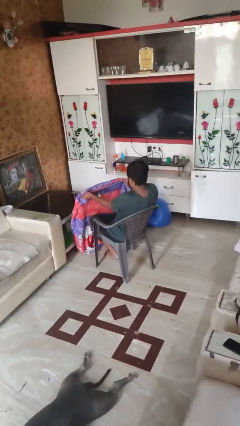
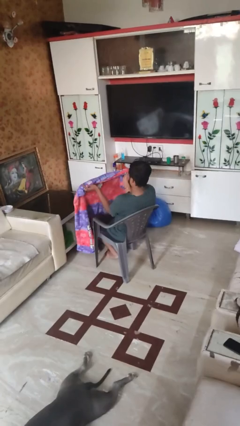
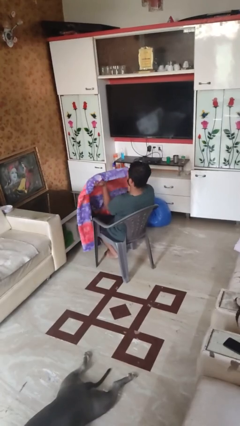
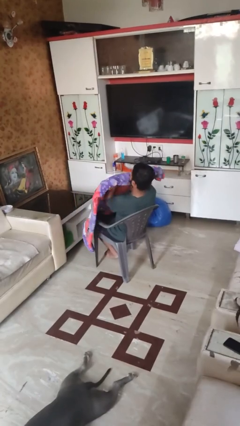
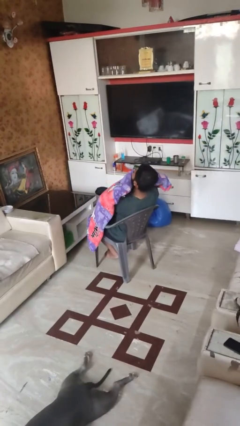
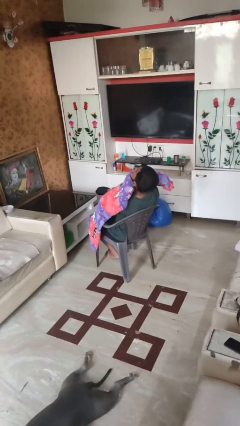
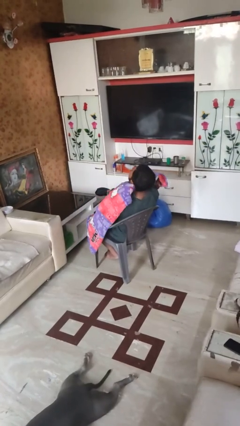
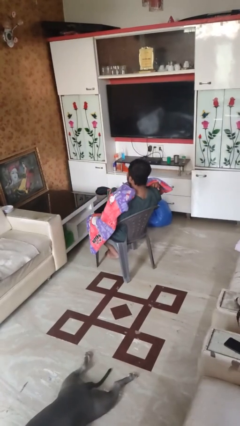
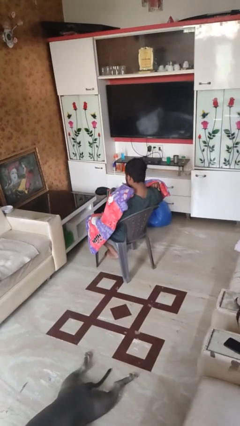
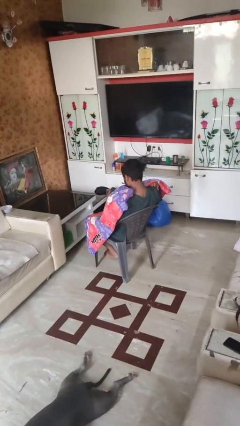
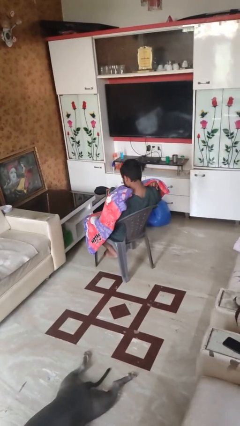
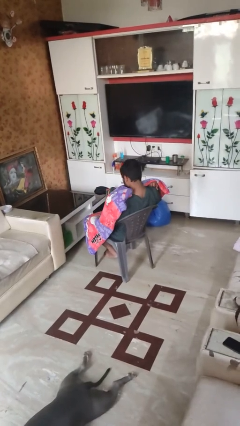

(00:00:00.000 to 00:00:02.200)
person covers with blanket

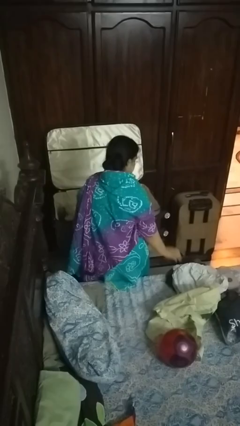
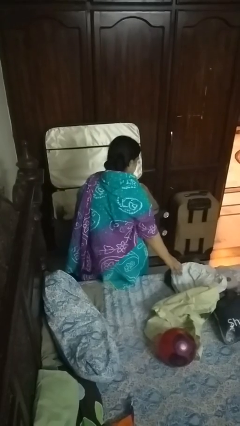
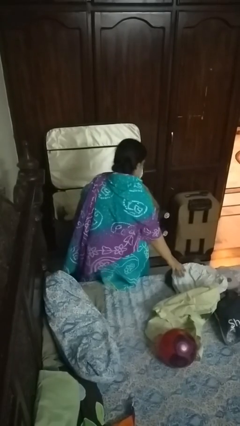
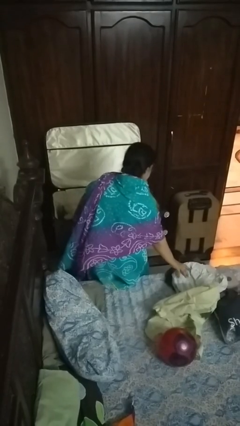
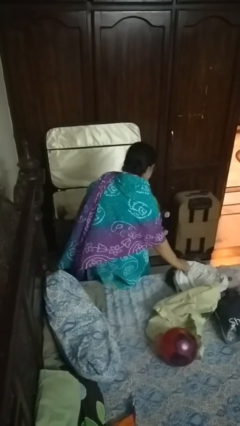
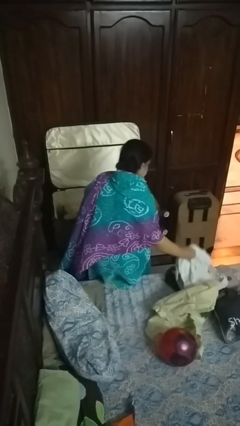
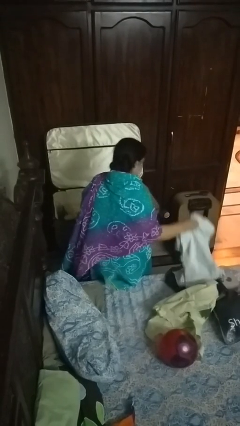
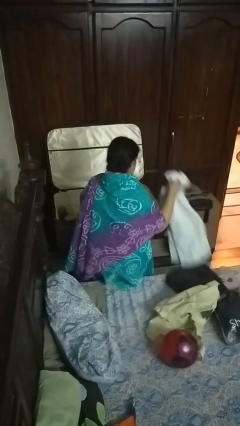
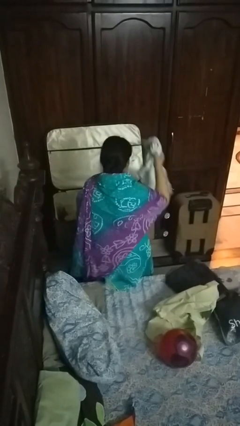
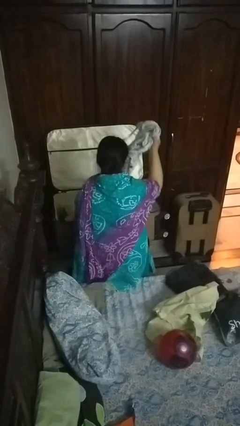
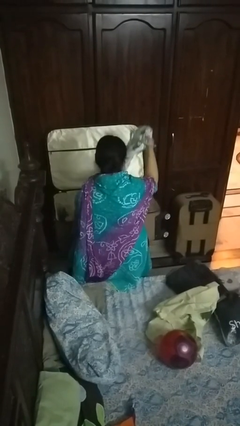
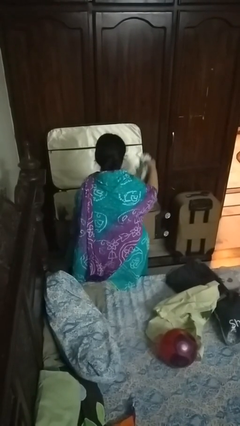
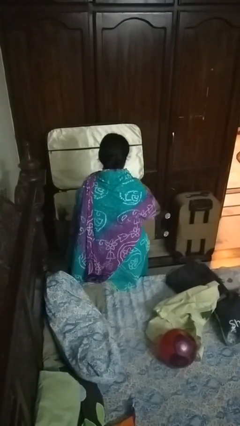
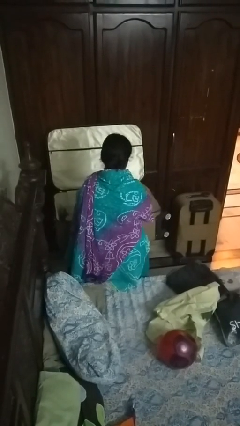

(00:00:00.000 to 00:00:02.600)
person loads clothes into suitcase

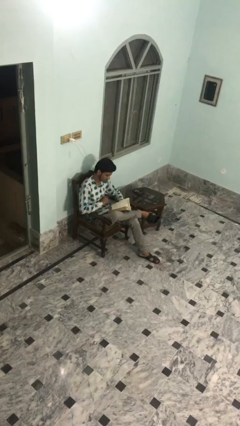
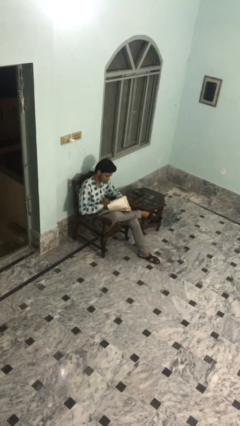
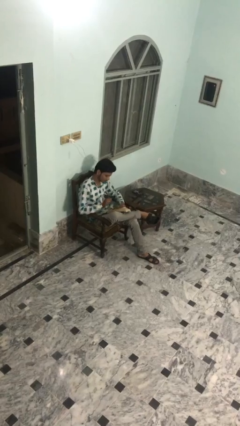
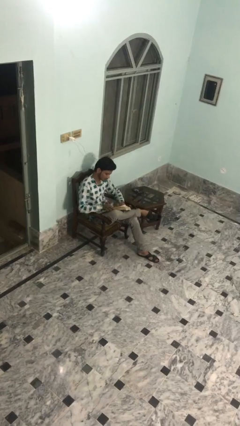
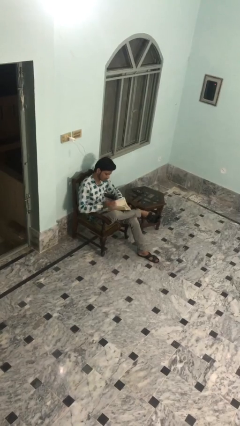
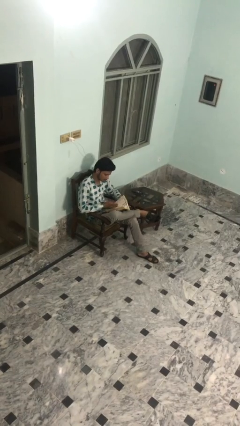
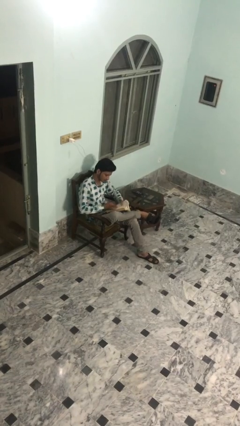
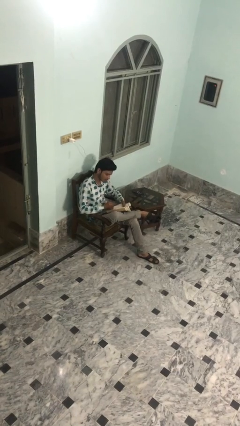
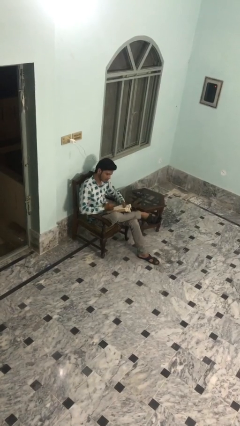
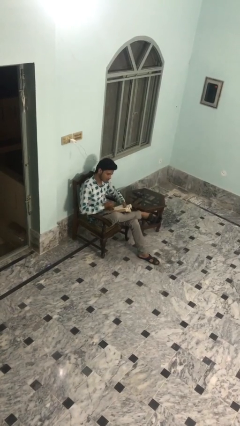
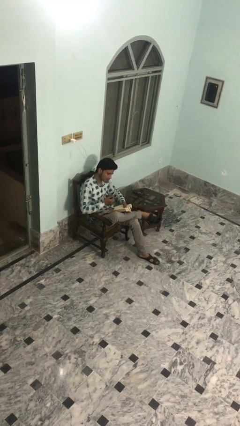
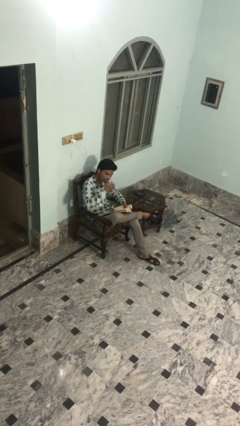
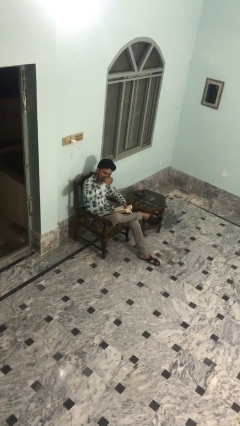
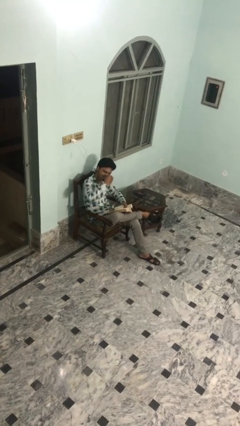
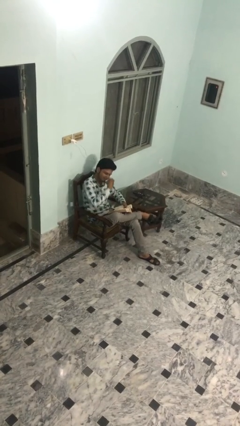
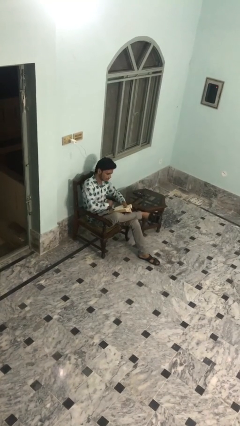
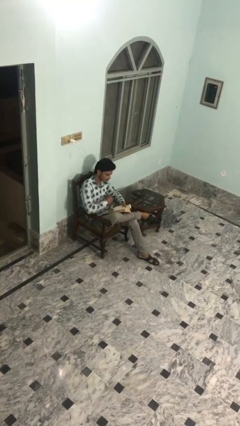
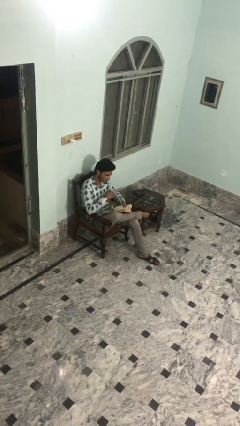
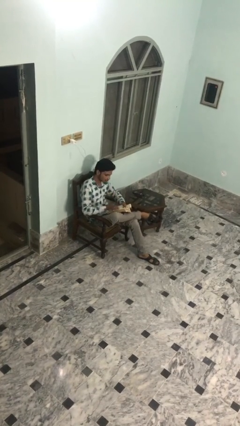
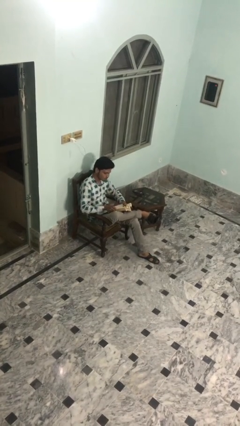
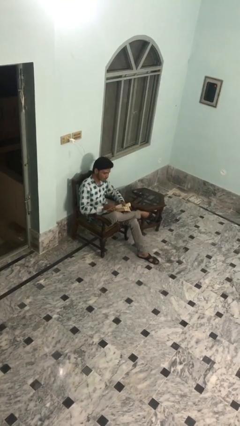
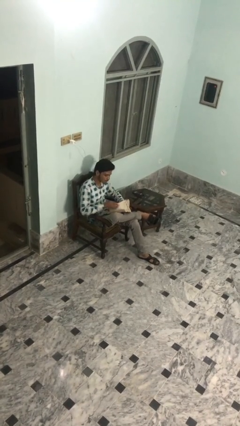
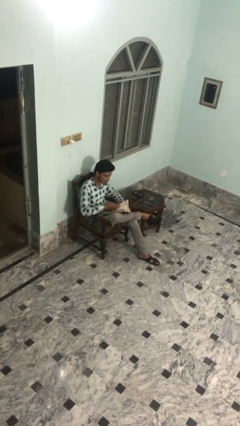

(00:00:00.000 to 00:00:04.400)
person reads document

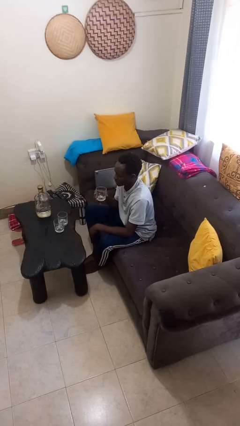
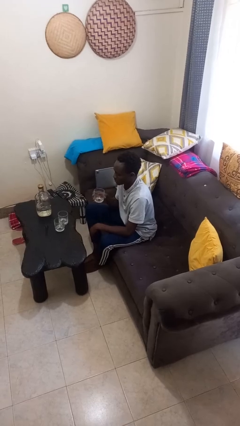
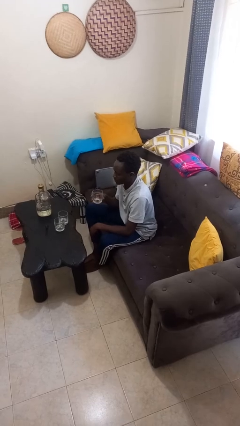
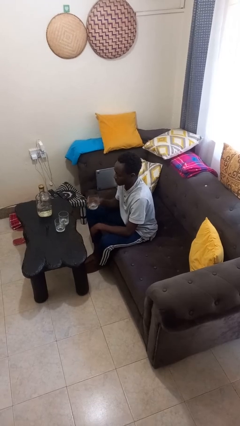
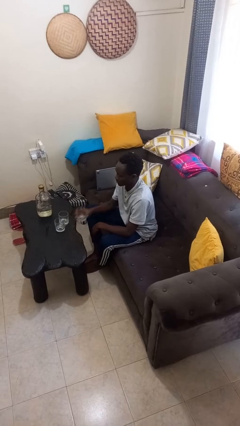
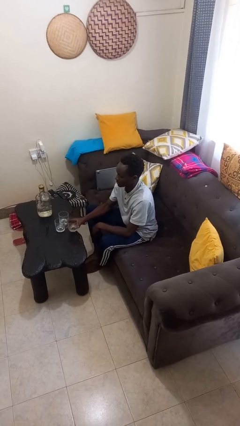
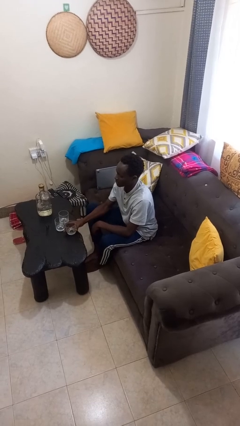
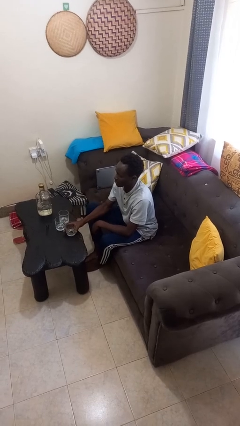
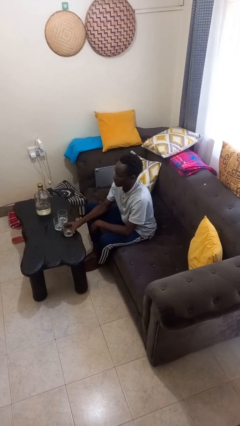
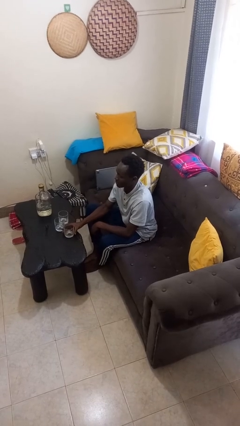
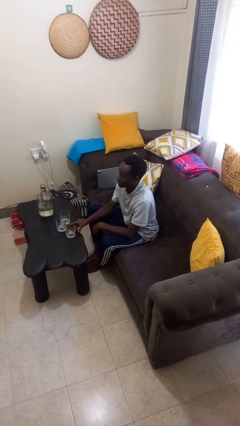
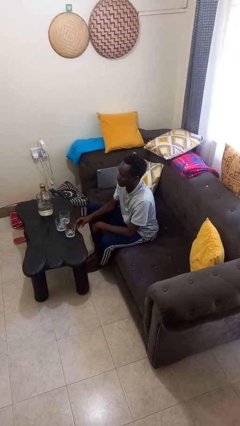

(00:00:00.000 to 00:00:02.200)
person puts down object on table

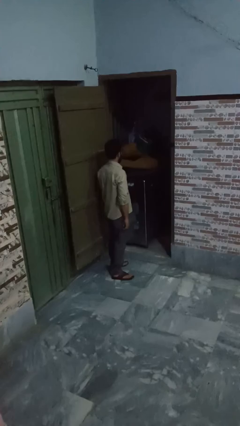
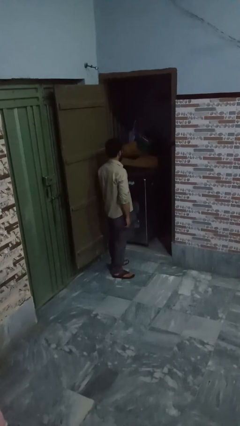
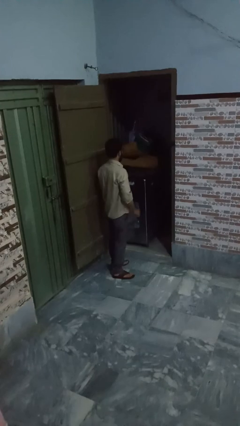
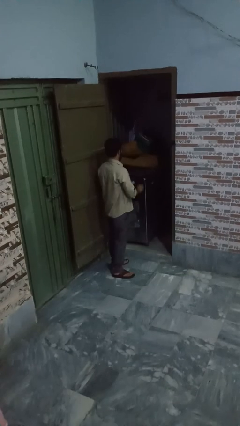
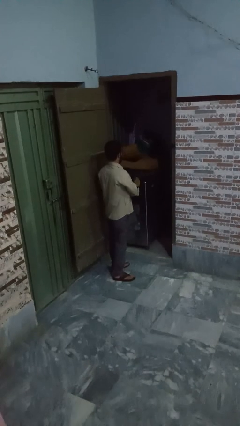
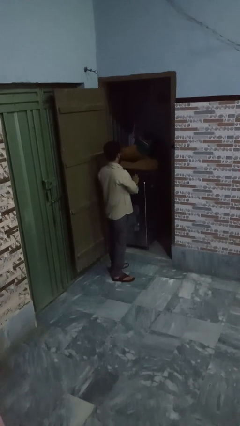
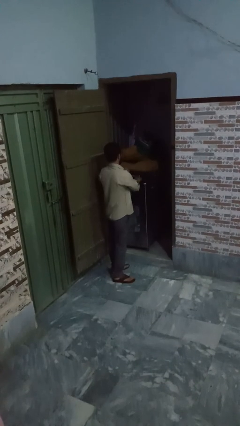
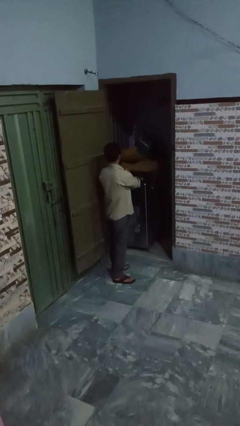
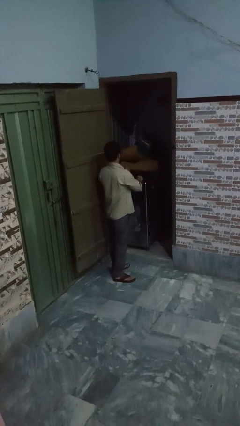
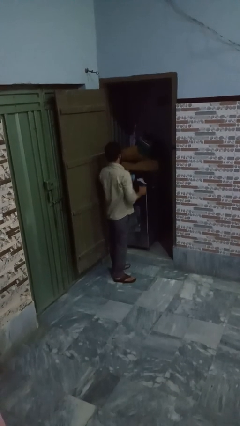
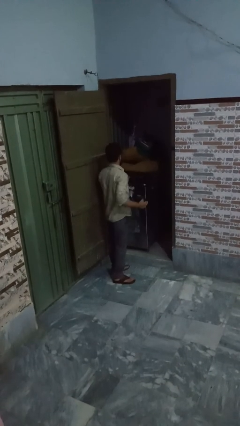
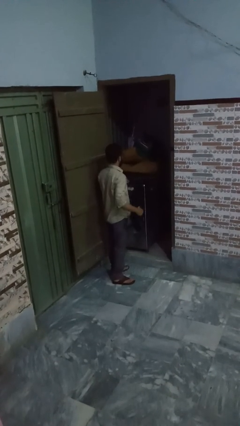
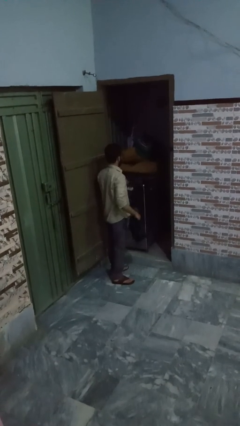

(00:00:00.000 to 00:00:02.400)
person unloads dryer

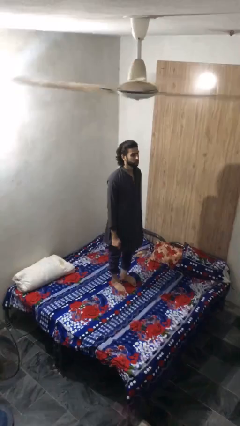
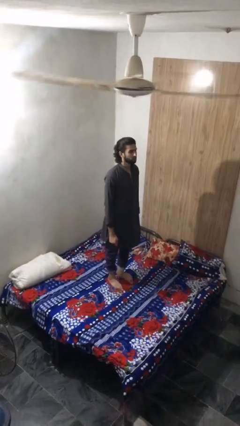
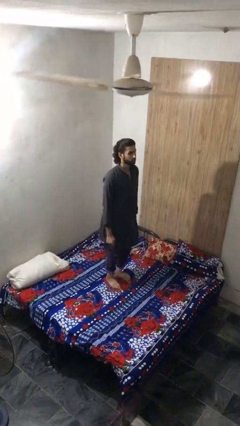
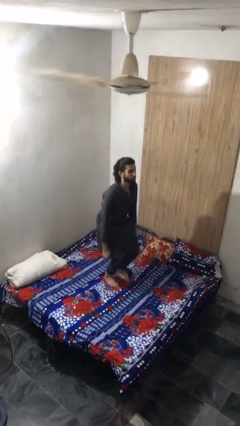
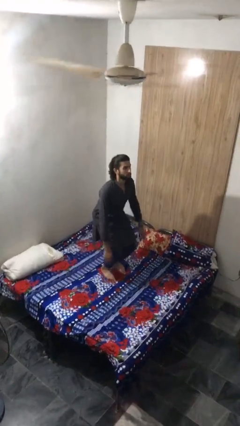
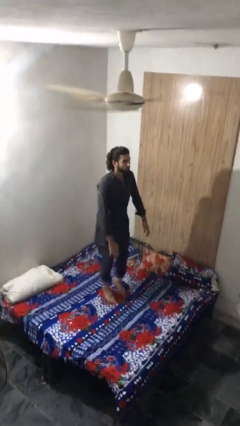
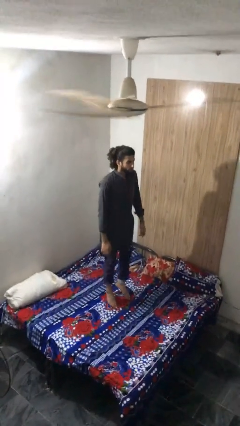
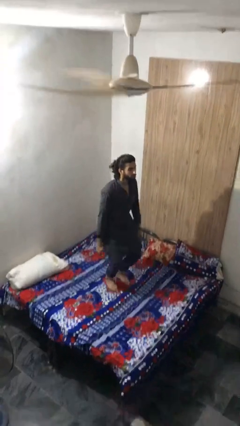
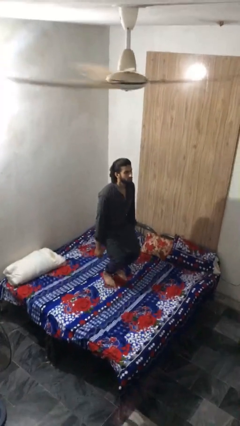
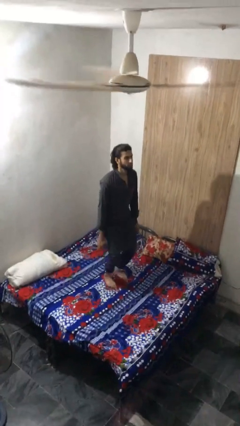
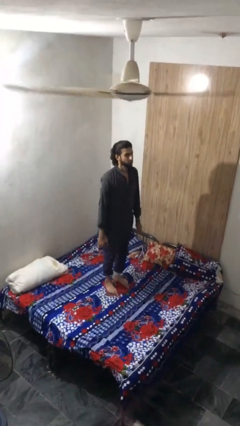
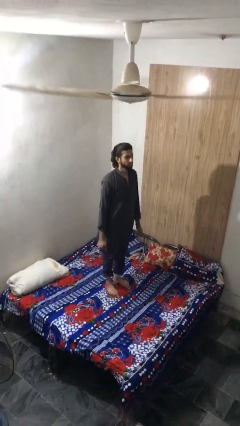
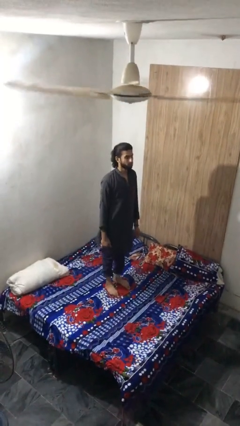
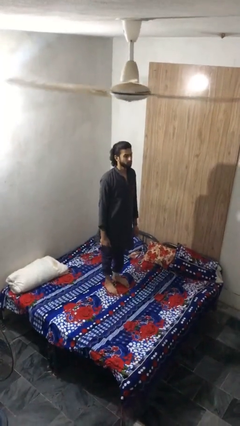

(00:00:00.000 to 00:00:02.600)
person jumps on bed

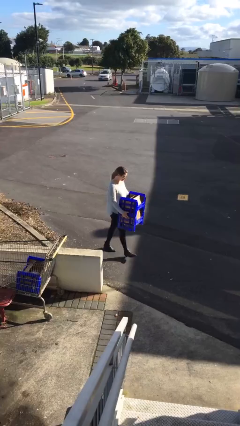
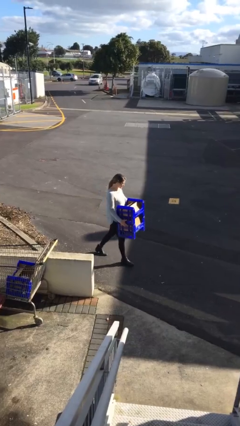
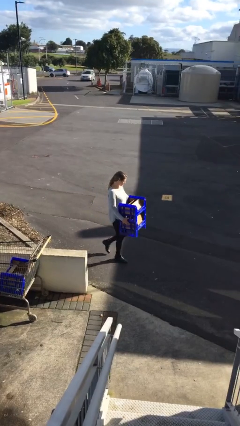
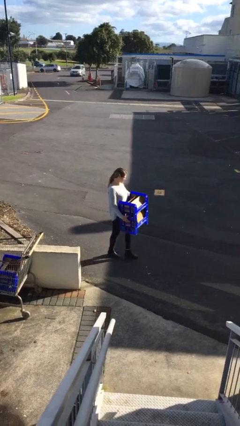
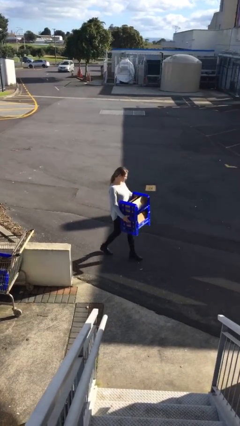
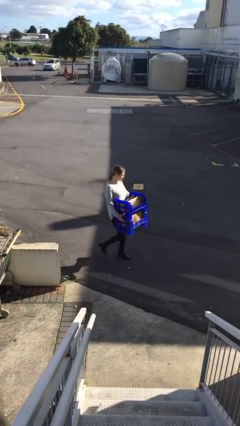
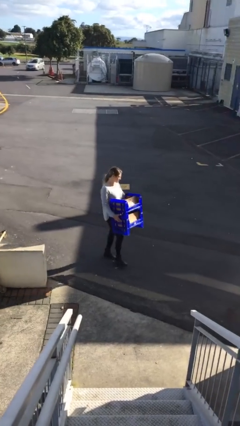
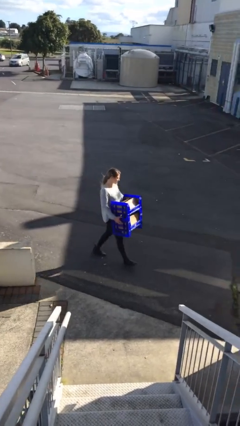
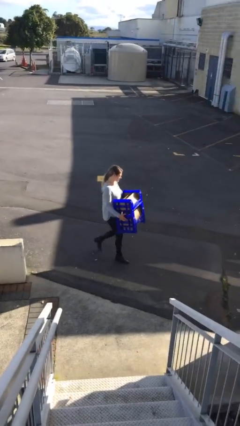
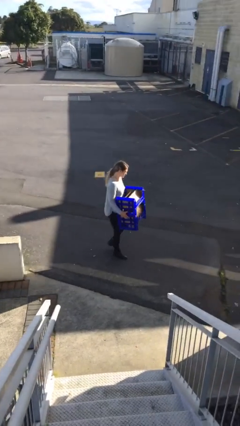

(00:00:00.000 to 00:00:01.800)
person carries heavy object
